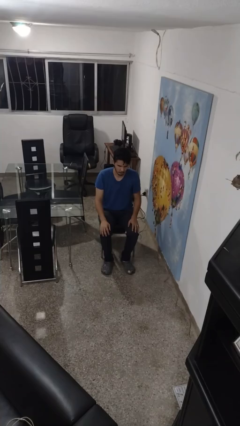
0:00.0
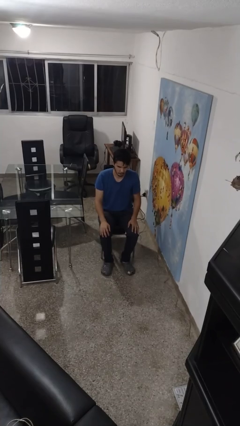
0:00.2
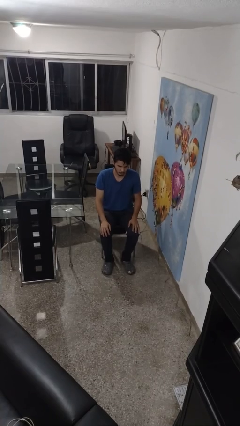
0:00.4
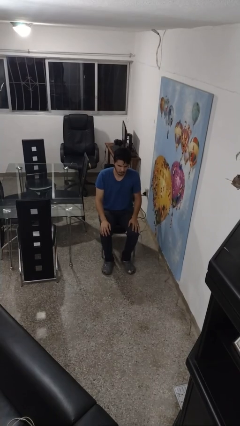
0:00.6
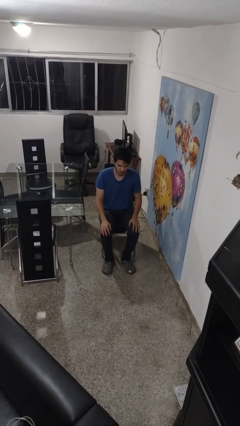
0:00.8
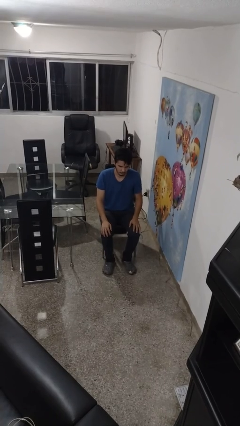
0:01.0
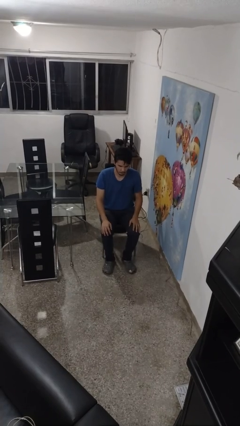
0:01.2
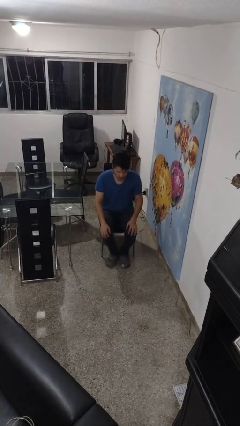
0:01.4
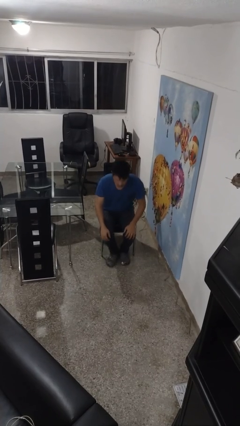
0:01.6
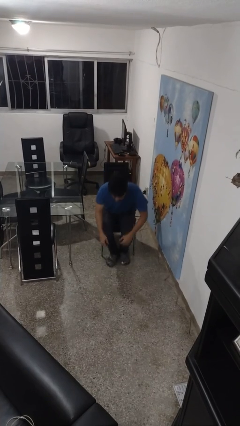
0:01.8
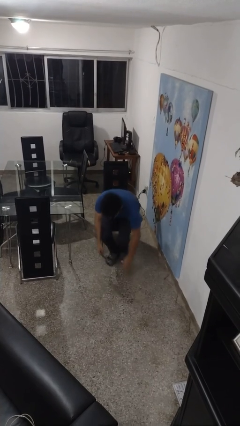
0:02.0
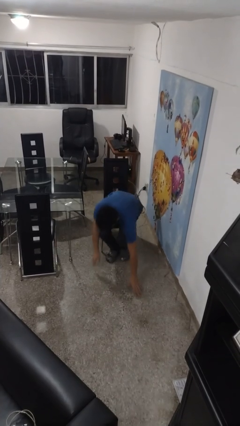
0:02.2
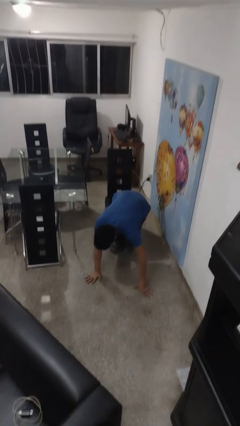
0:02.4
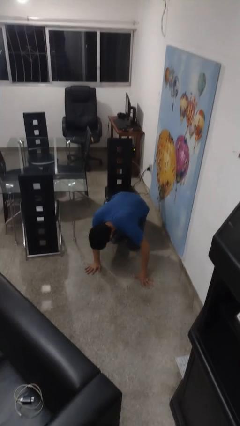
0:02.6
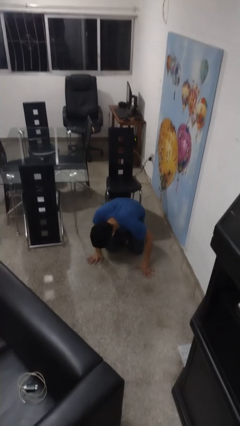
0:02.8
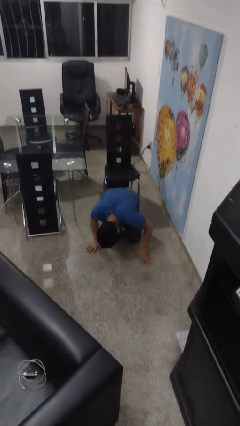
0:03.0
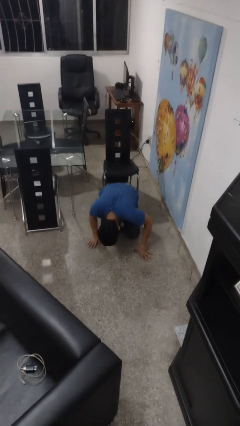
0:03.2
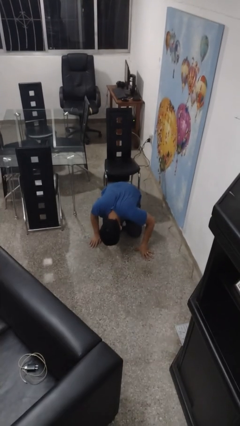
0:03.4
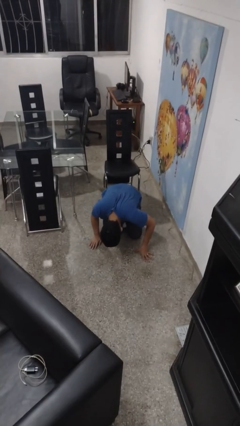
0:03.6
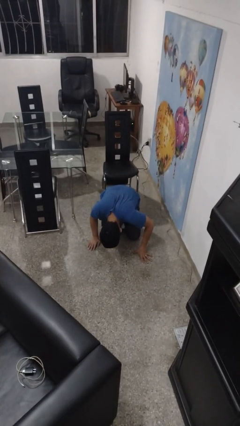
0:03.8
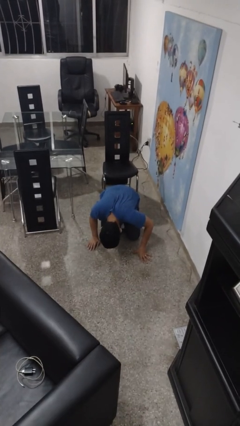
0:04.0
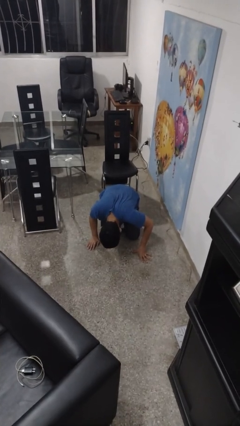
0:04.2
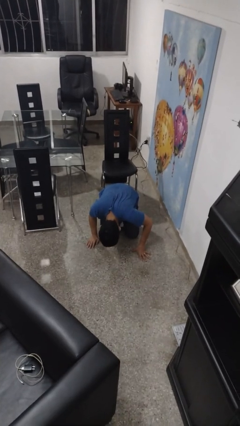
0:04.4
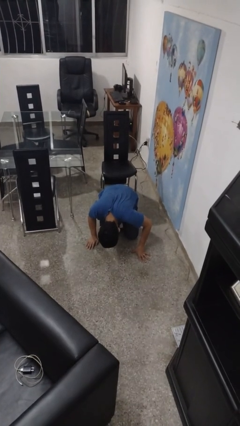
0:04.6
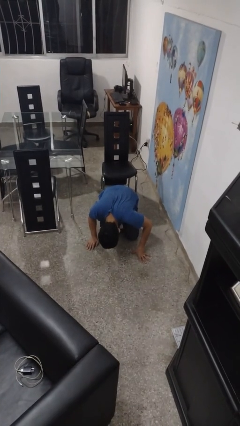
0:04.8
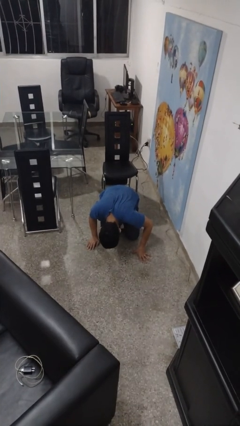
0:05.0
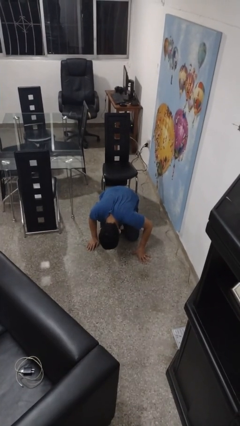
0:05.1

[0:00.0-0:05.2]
person falls from chair

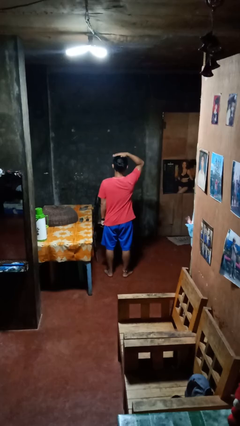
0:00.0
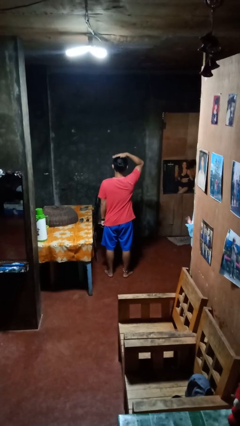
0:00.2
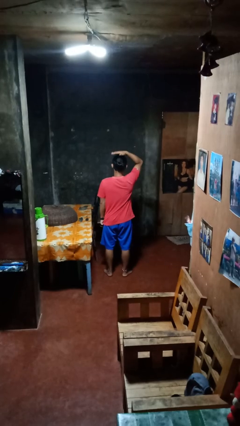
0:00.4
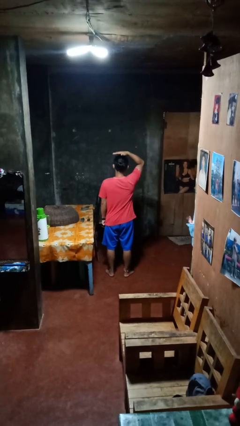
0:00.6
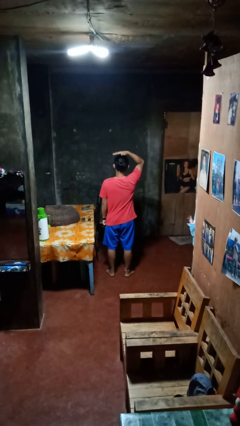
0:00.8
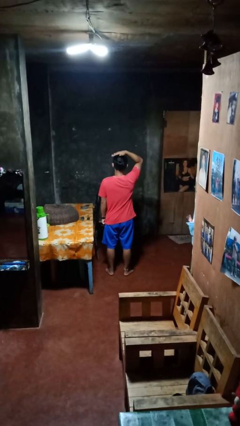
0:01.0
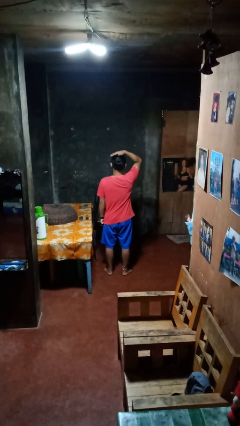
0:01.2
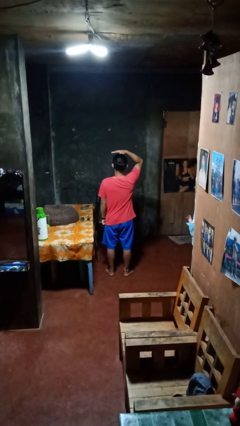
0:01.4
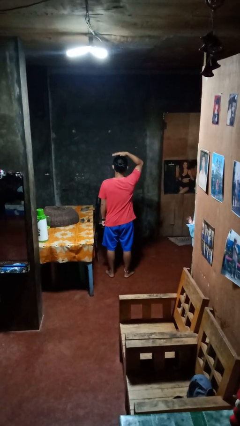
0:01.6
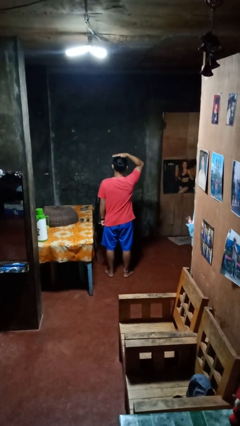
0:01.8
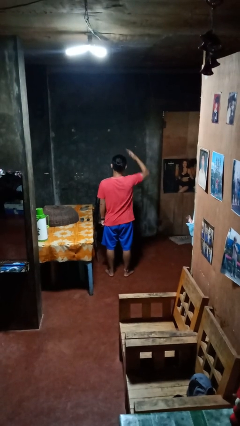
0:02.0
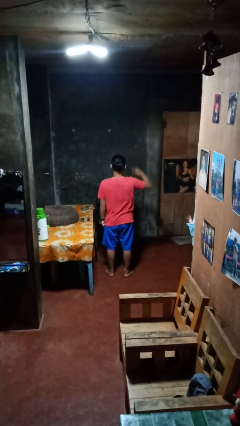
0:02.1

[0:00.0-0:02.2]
person pats head

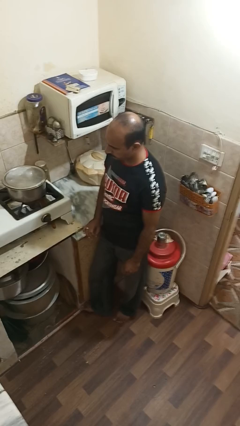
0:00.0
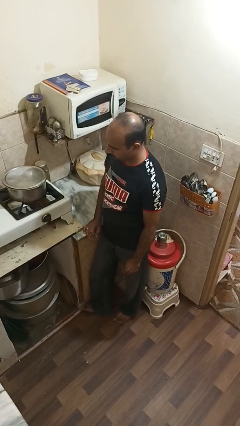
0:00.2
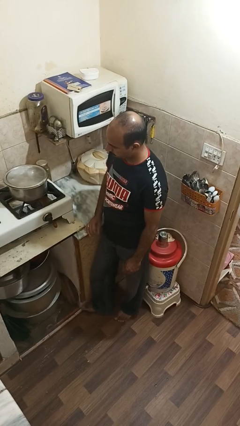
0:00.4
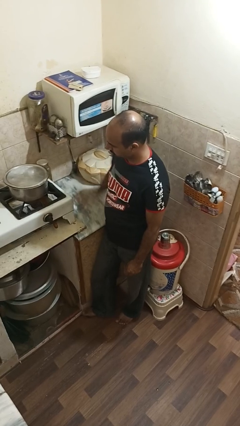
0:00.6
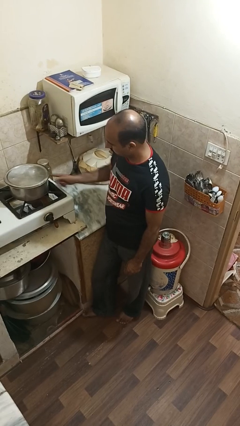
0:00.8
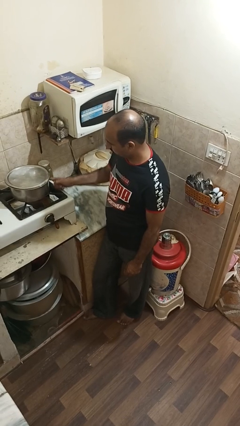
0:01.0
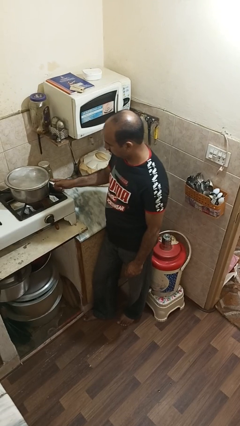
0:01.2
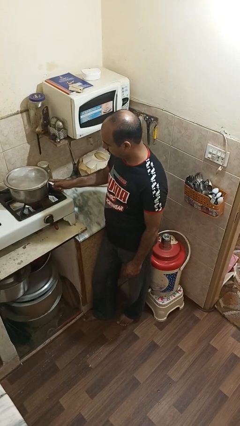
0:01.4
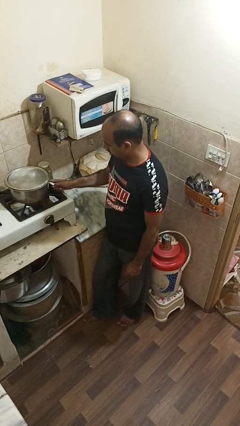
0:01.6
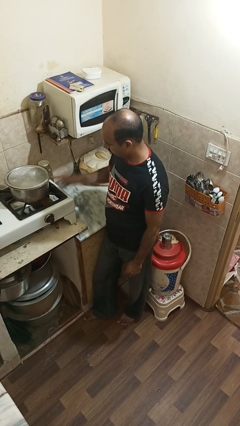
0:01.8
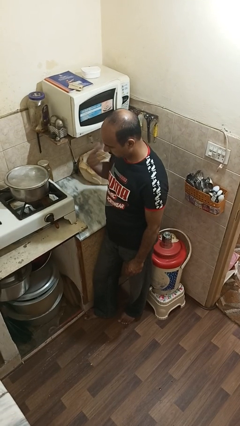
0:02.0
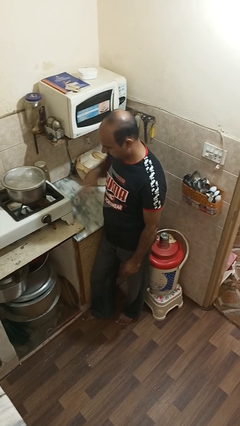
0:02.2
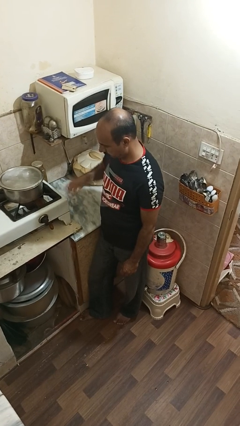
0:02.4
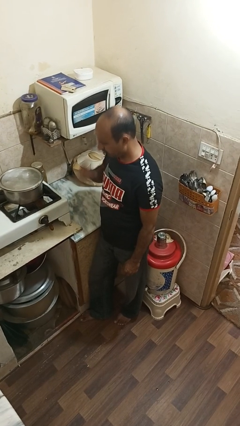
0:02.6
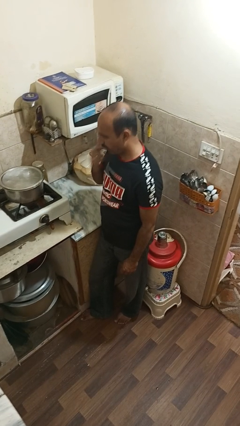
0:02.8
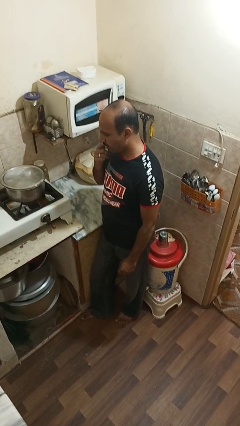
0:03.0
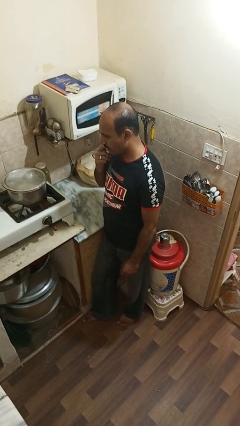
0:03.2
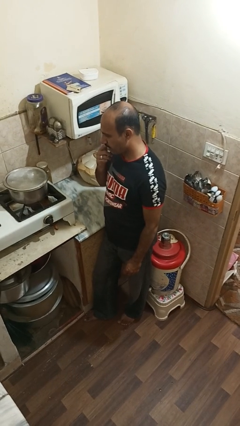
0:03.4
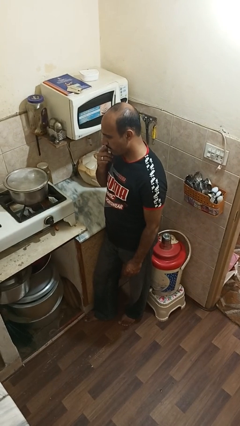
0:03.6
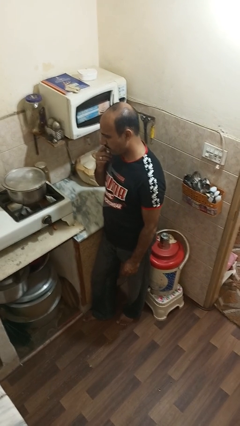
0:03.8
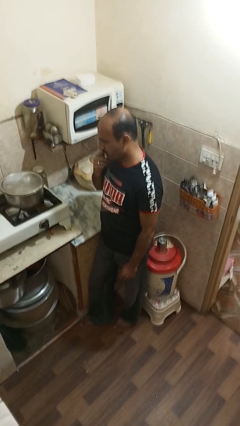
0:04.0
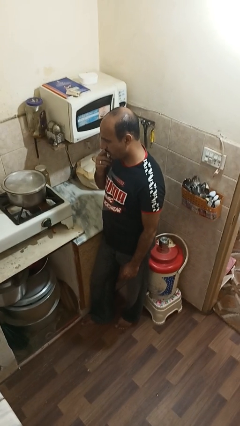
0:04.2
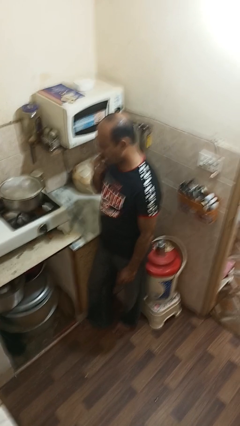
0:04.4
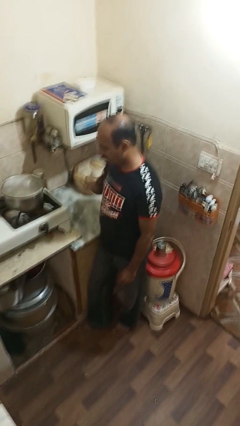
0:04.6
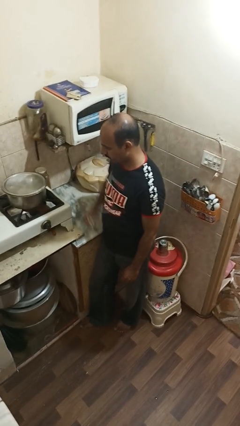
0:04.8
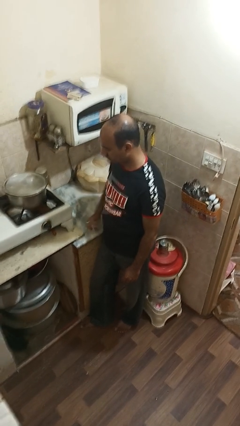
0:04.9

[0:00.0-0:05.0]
person burns hand

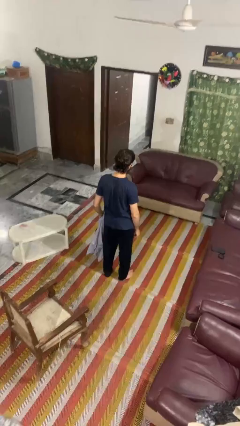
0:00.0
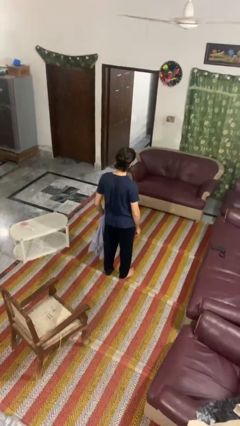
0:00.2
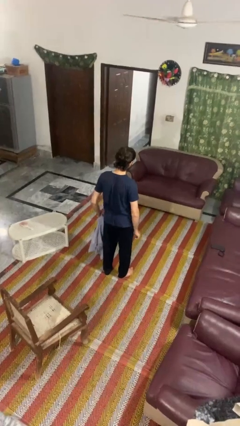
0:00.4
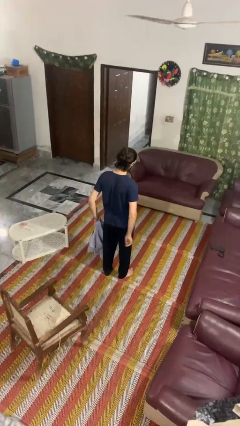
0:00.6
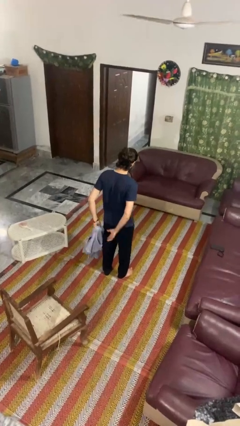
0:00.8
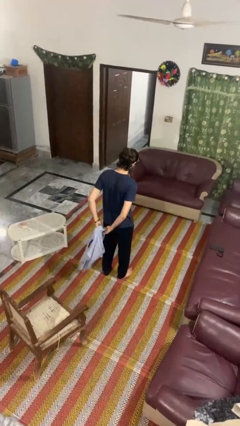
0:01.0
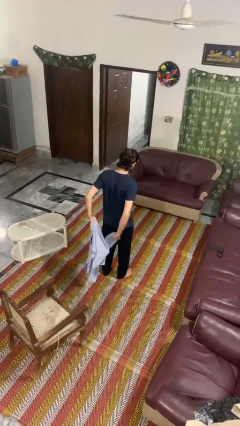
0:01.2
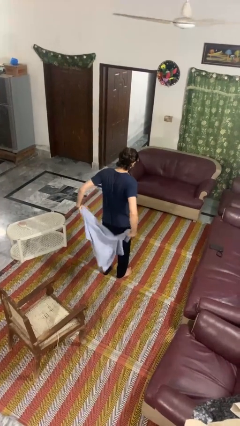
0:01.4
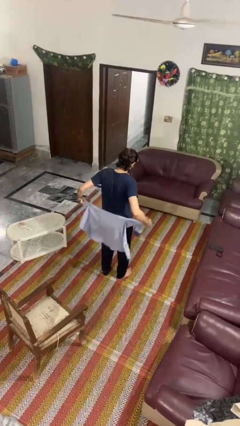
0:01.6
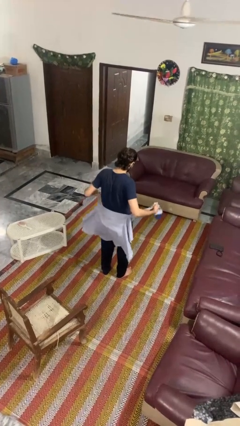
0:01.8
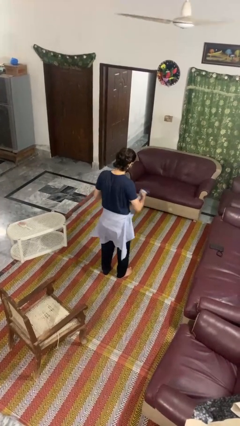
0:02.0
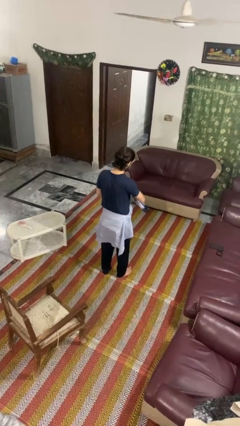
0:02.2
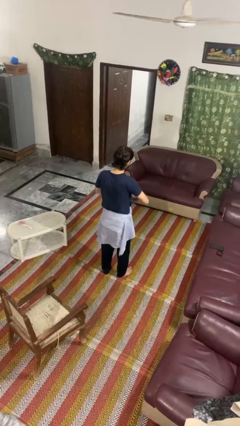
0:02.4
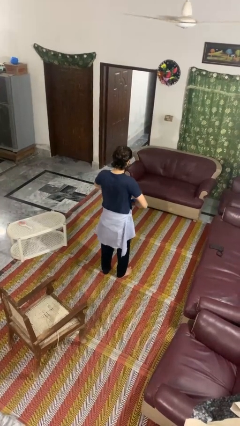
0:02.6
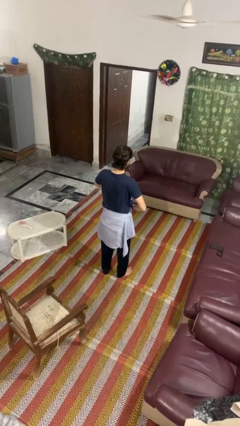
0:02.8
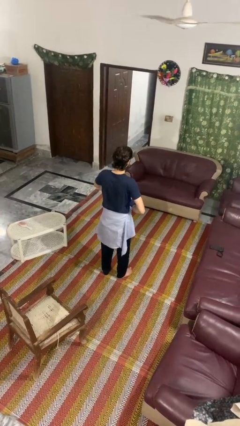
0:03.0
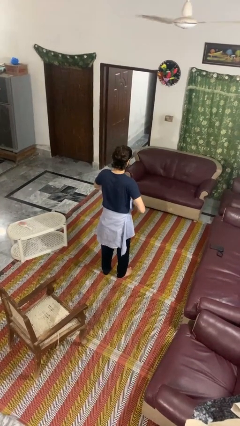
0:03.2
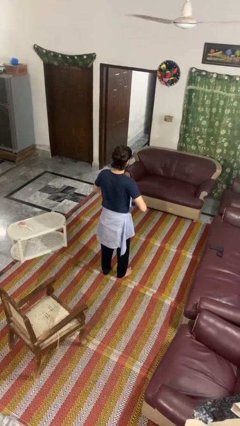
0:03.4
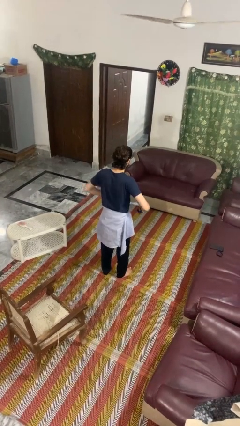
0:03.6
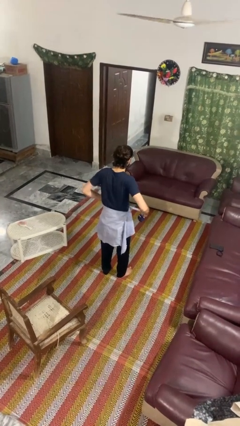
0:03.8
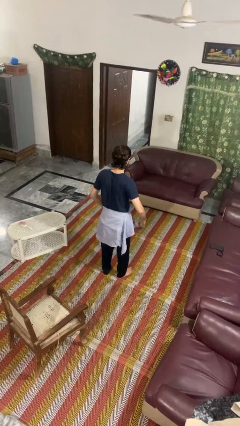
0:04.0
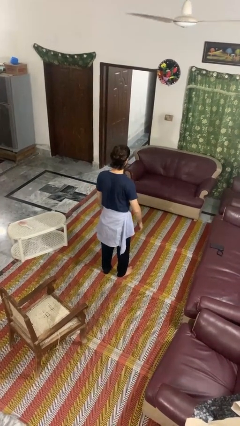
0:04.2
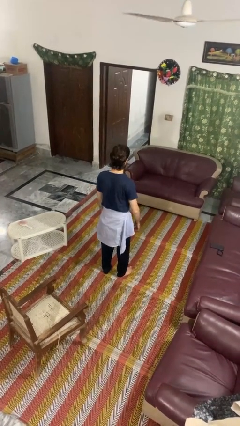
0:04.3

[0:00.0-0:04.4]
person ties jacket around waist

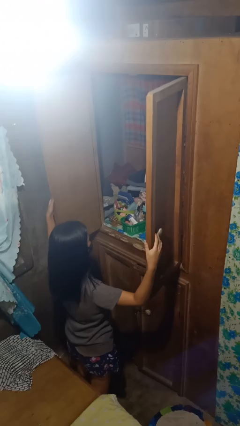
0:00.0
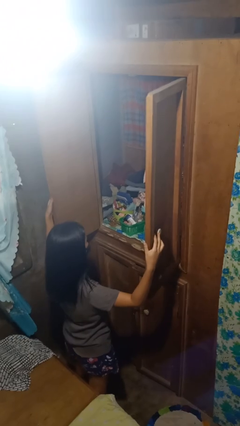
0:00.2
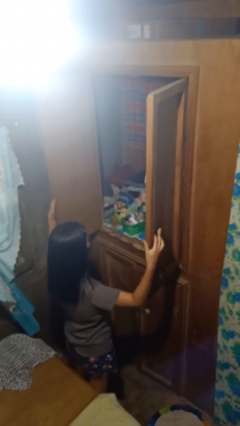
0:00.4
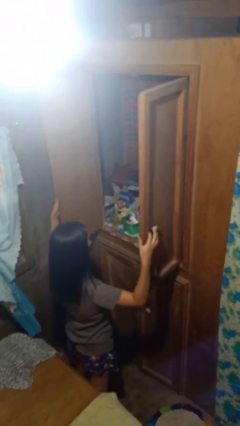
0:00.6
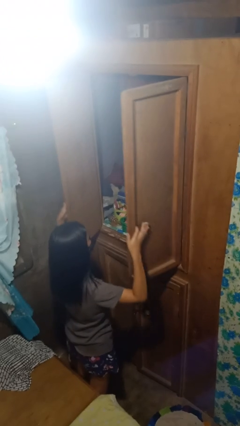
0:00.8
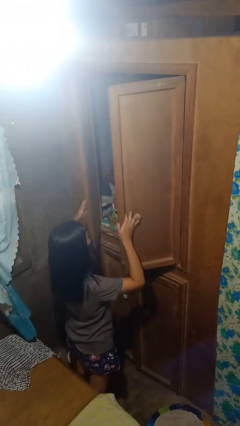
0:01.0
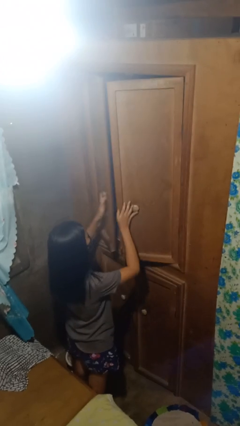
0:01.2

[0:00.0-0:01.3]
person closes closet door
